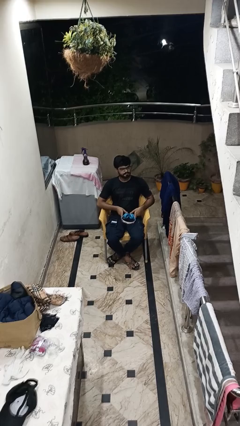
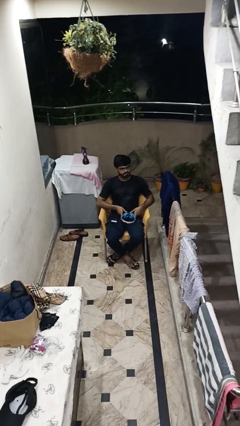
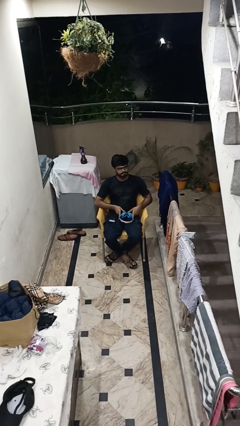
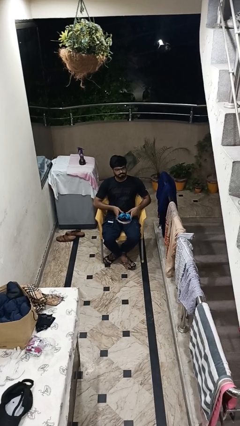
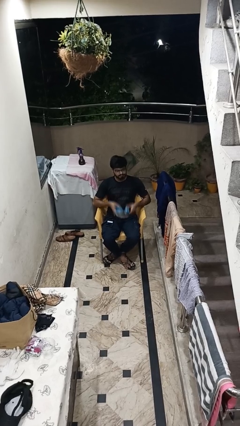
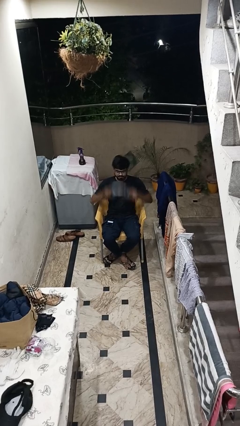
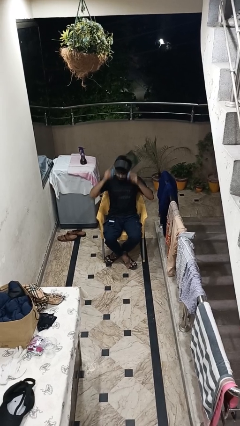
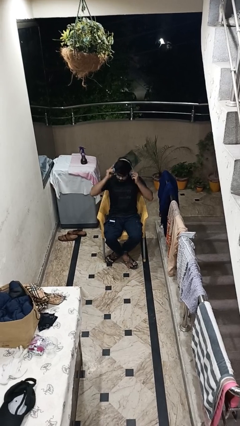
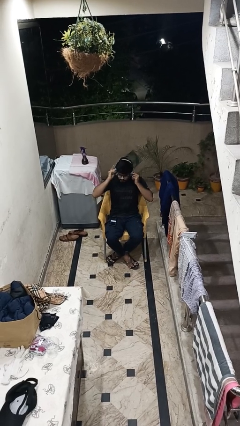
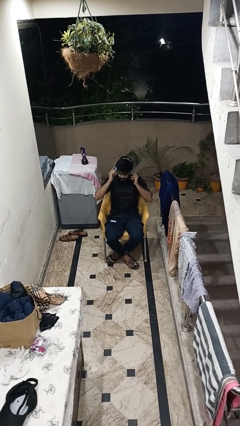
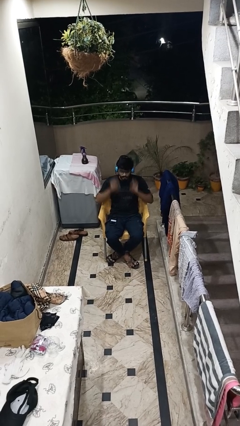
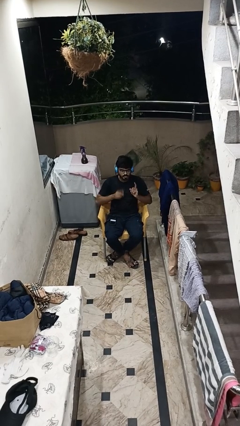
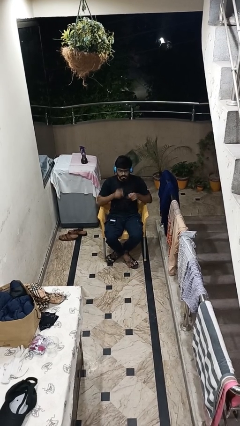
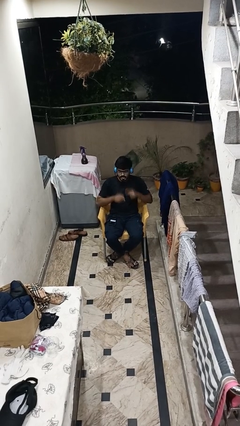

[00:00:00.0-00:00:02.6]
person puts on headphones

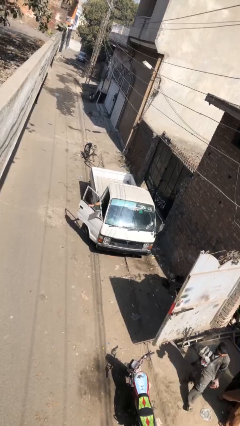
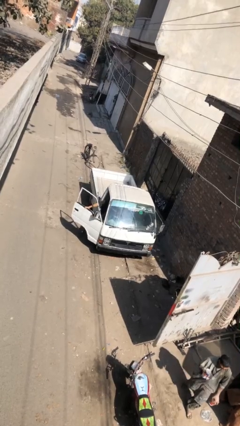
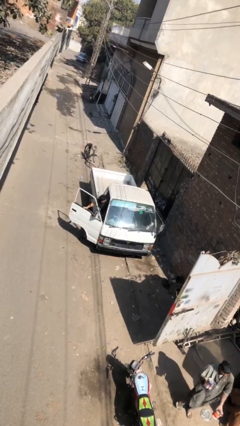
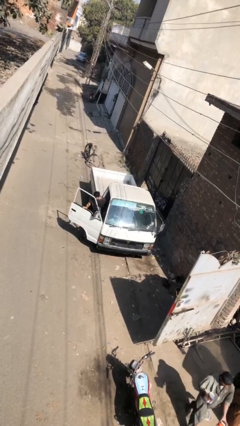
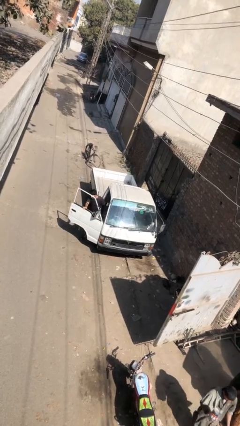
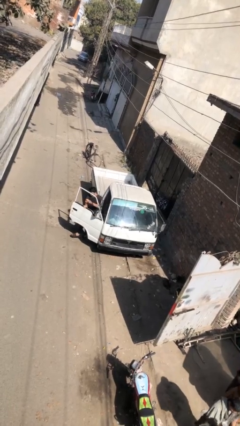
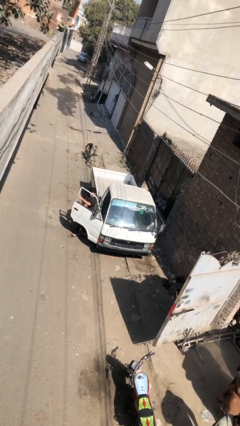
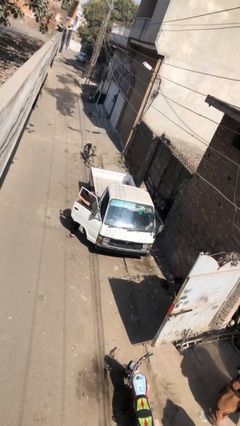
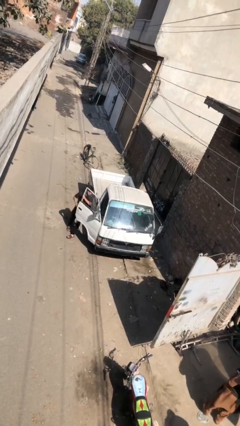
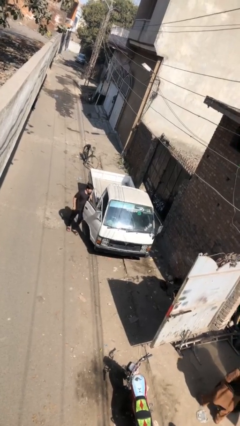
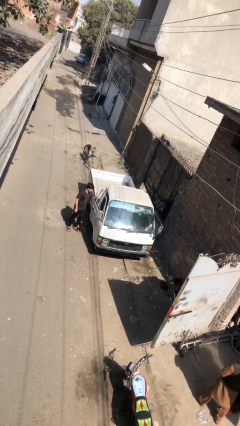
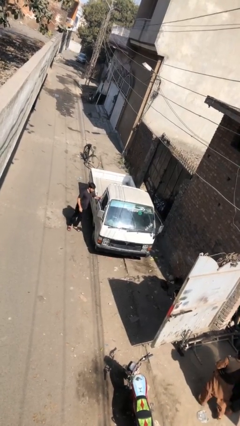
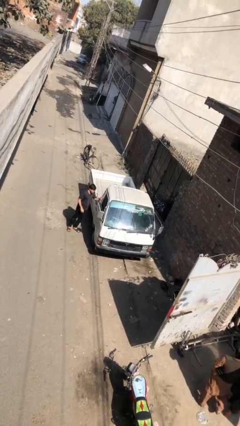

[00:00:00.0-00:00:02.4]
car drops off person

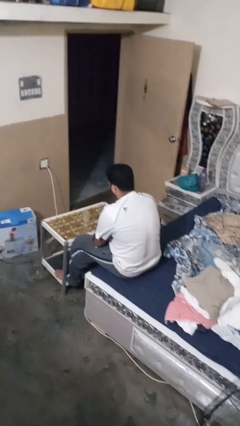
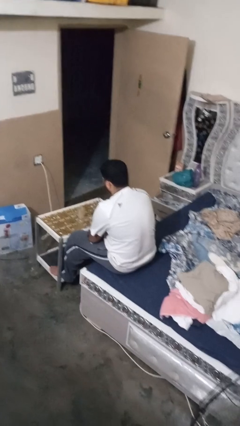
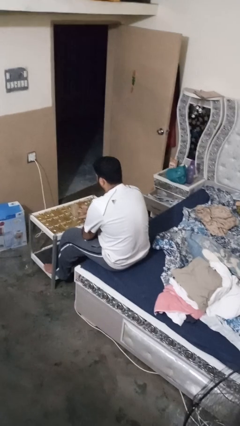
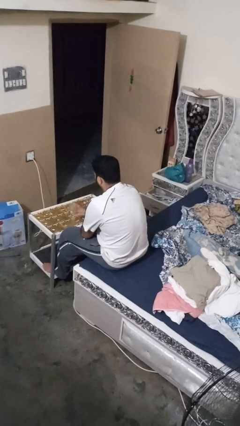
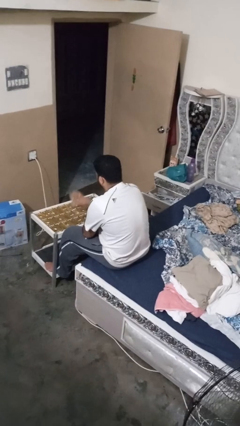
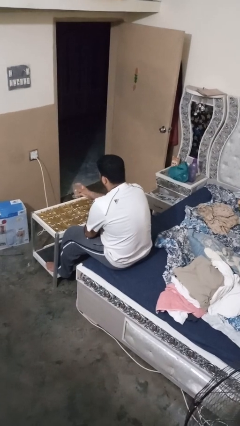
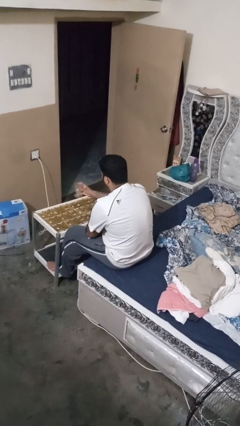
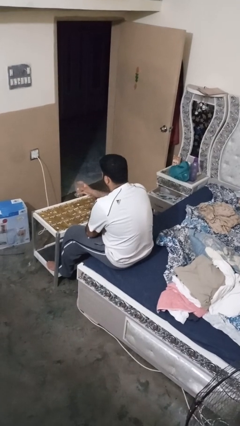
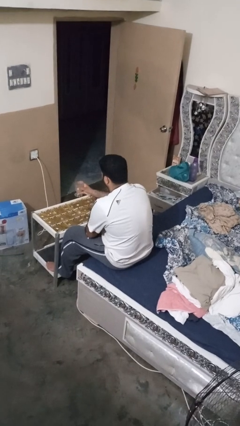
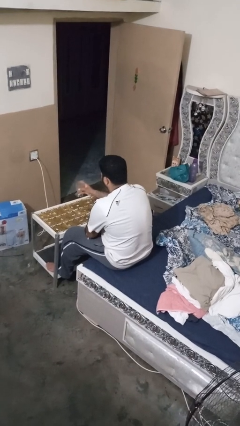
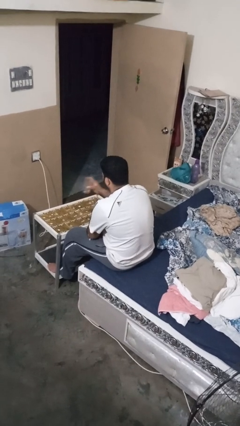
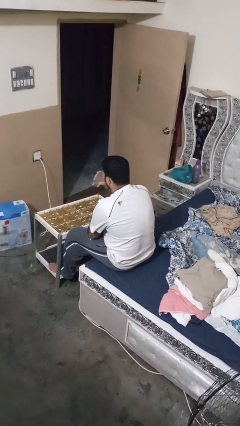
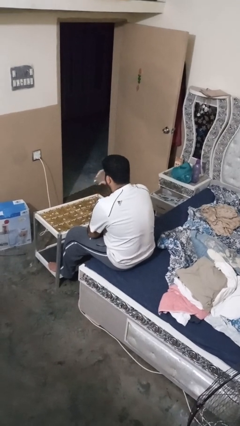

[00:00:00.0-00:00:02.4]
person picks up object from table

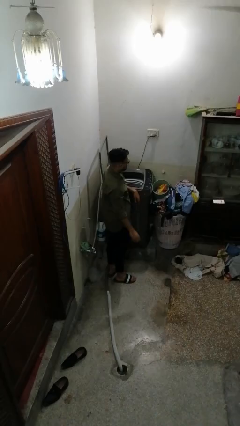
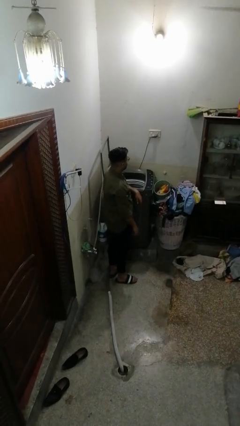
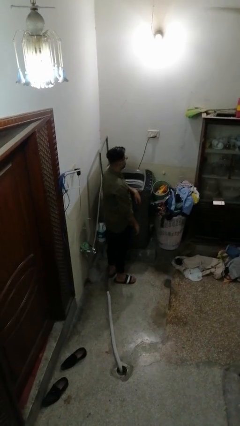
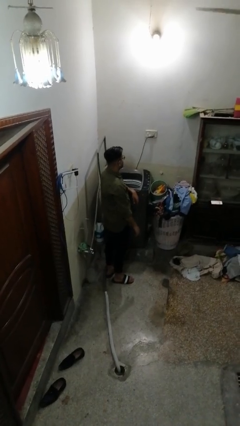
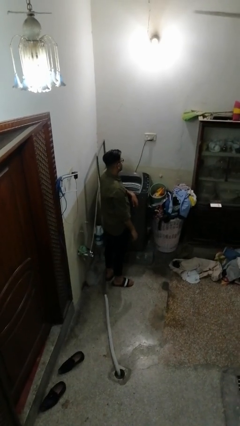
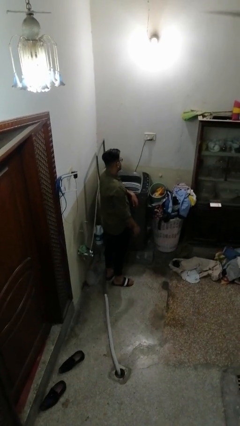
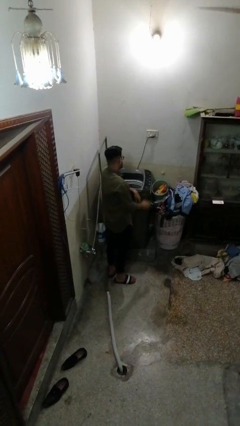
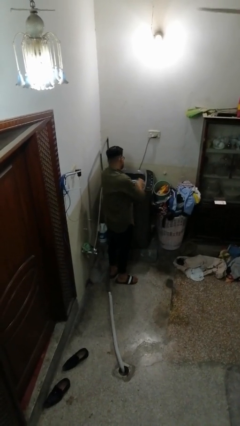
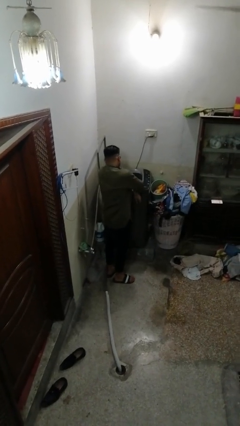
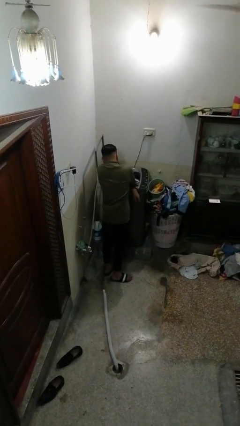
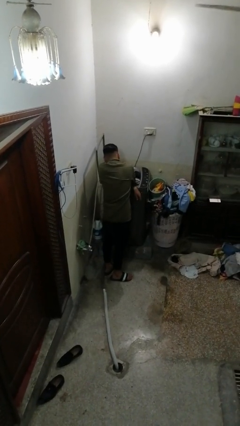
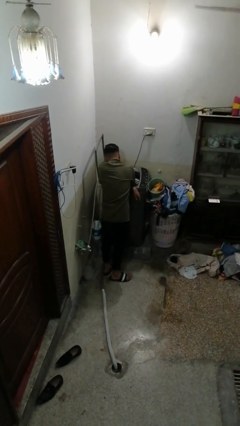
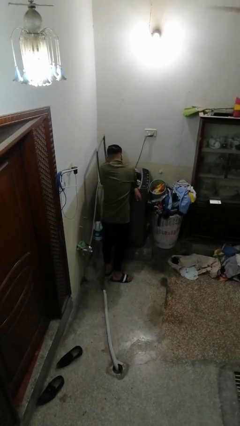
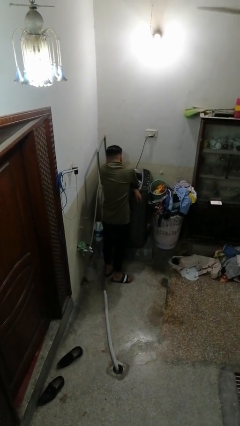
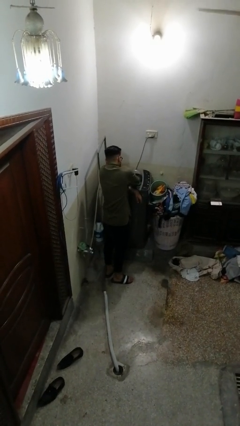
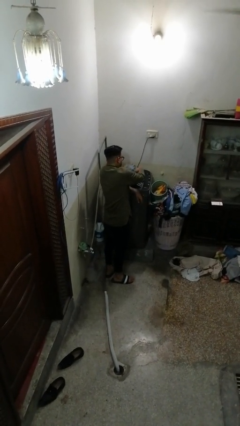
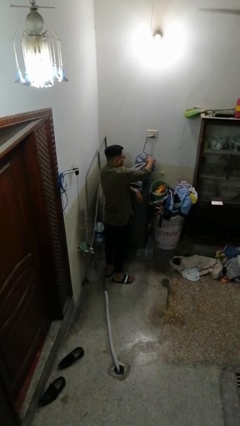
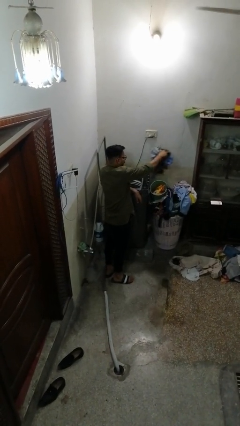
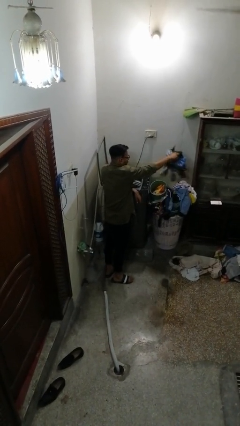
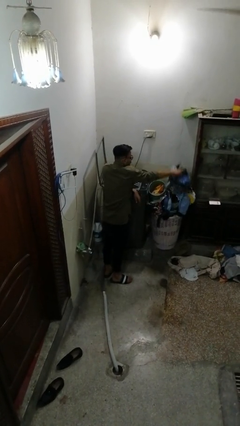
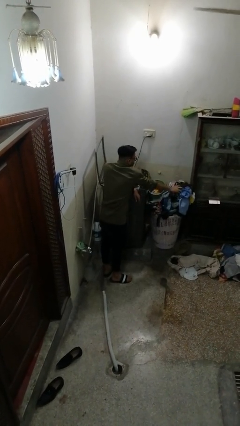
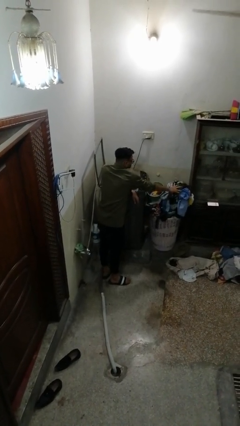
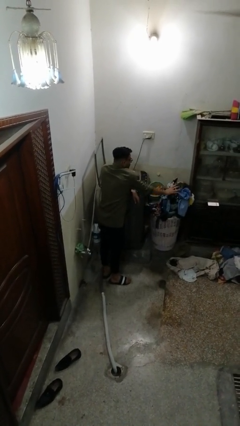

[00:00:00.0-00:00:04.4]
person unloads clotheswasher

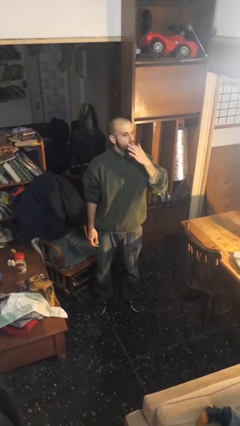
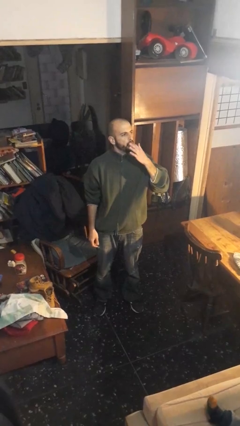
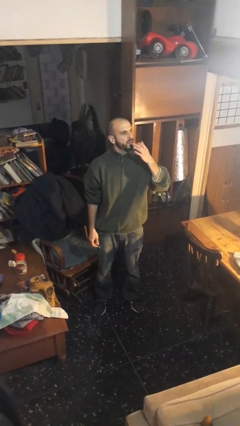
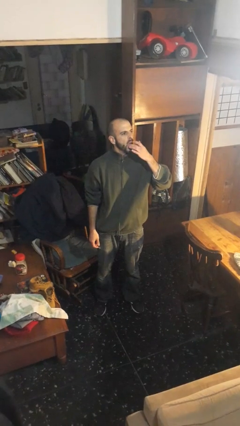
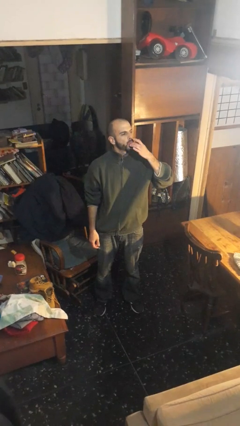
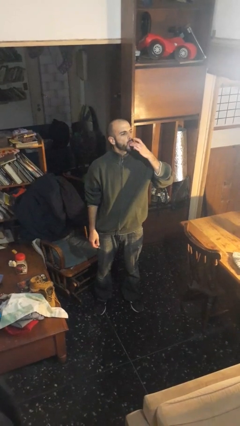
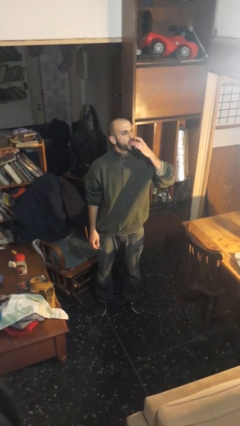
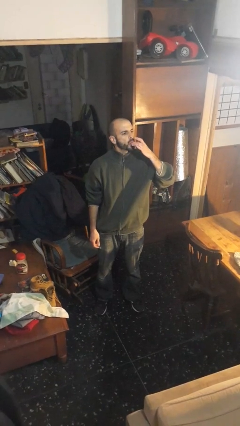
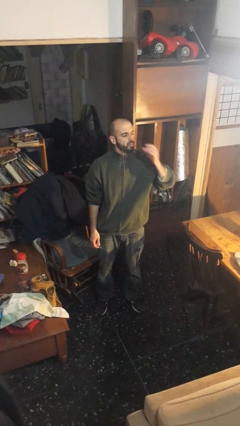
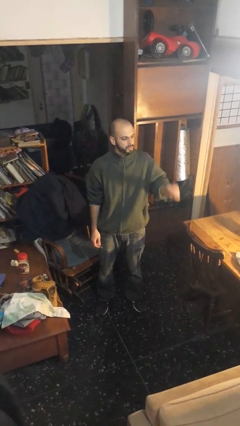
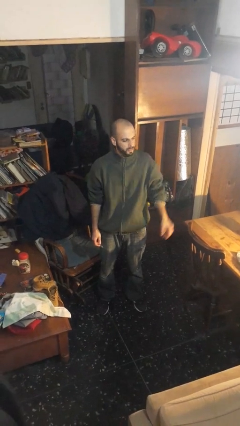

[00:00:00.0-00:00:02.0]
person licks fingers

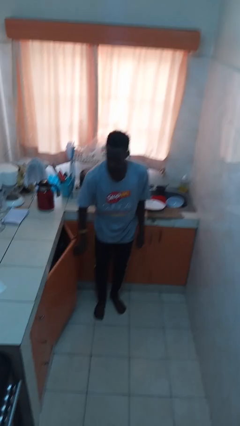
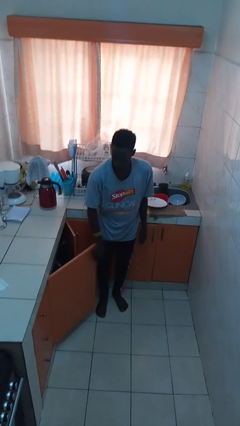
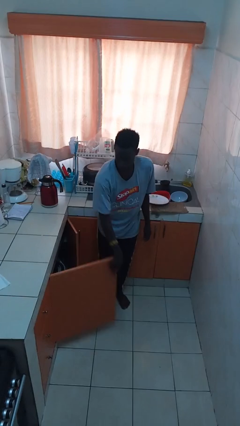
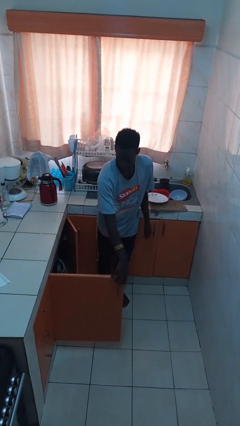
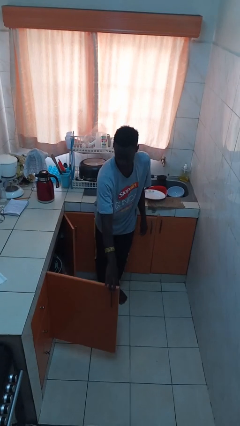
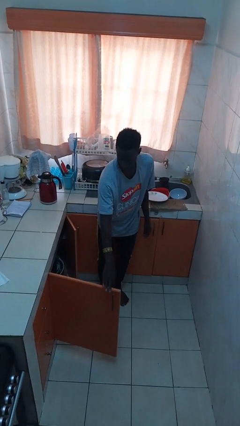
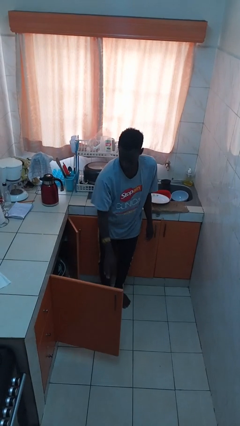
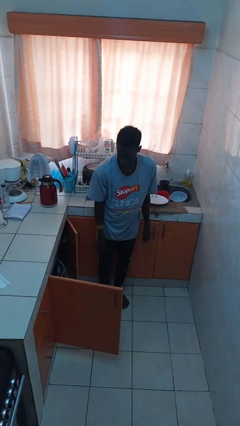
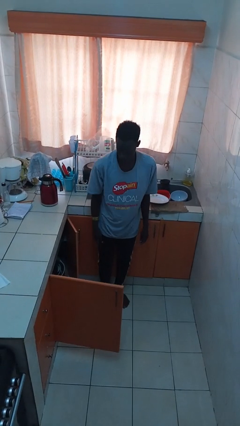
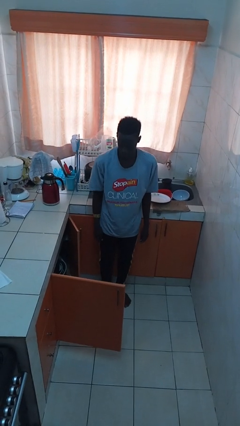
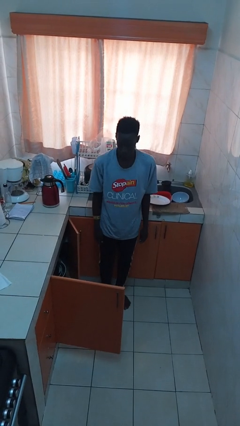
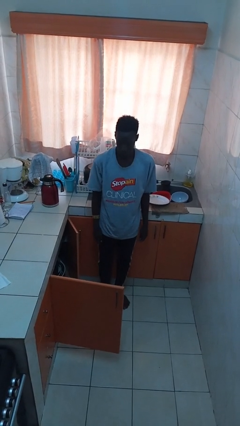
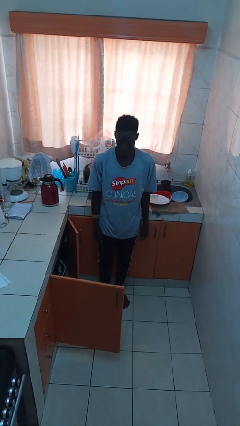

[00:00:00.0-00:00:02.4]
person opens cabinet

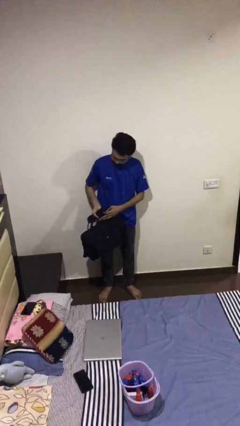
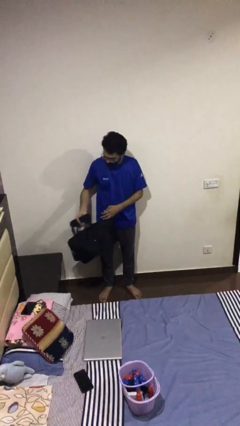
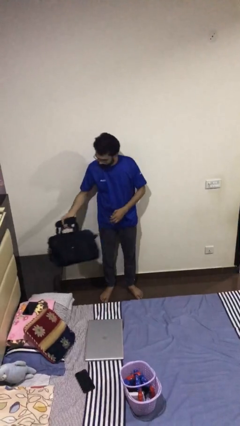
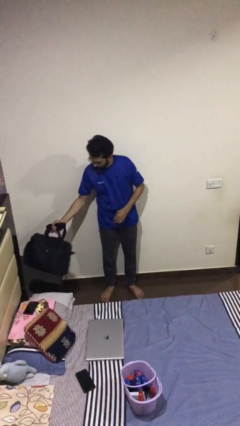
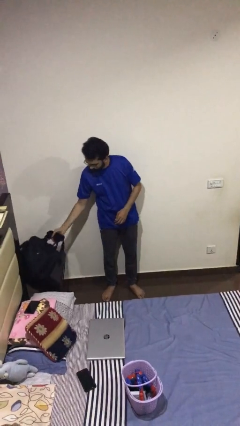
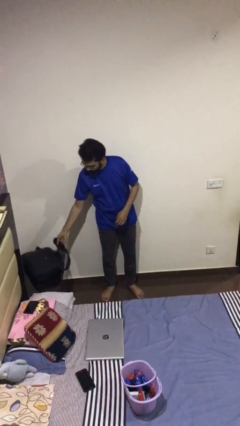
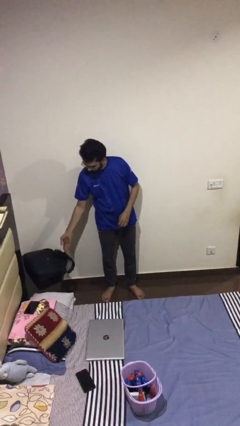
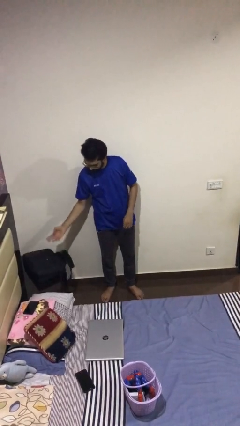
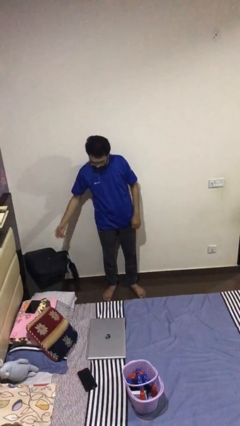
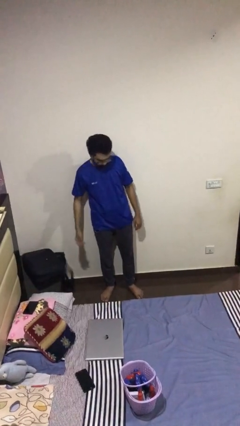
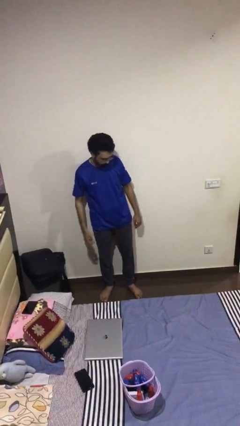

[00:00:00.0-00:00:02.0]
person puts down object on table
